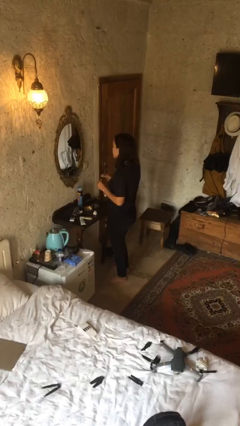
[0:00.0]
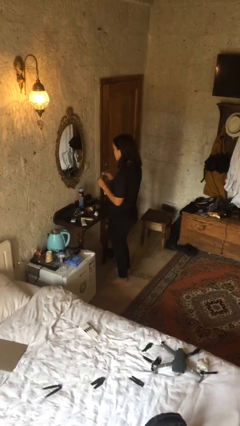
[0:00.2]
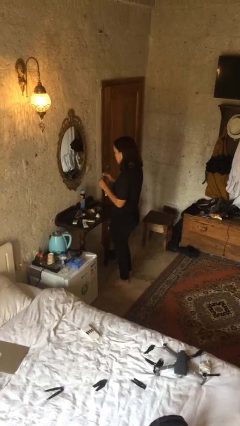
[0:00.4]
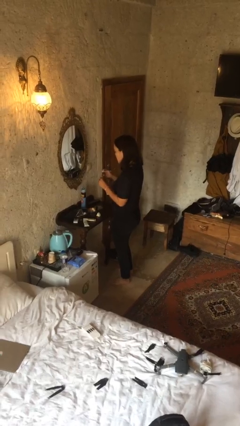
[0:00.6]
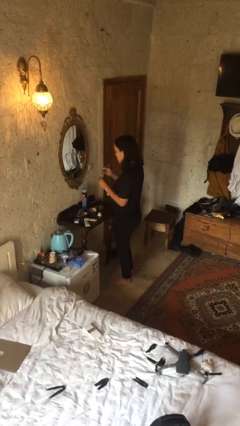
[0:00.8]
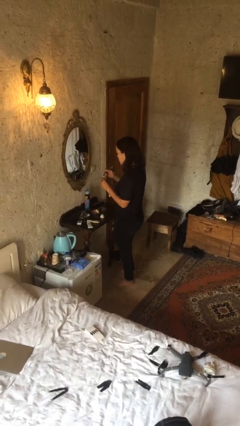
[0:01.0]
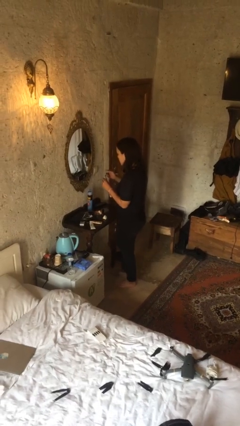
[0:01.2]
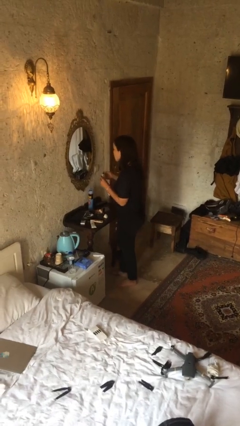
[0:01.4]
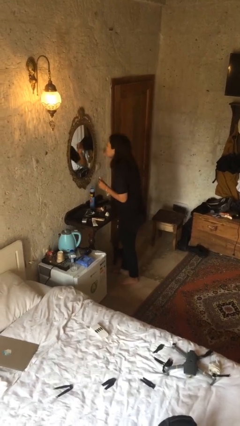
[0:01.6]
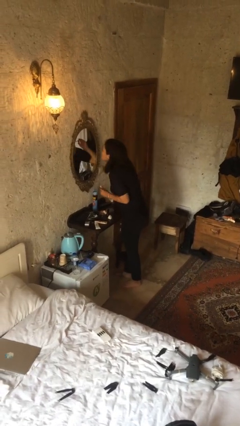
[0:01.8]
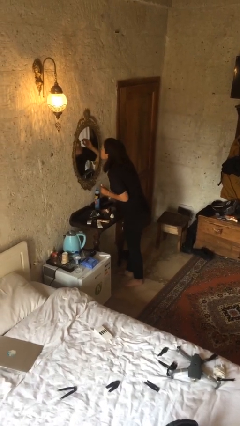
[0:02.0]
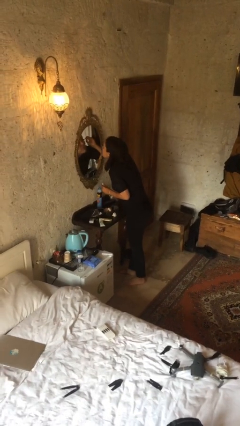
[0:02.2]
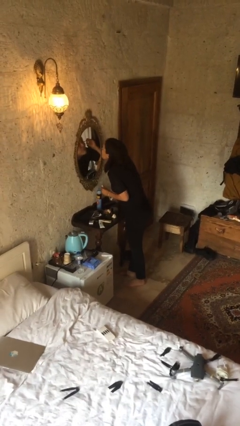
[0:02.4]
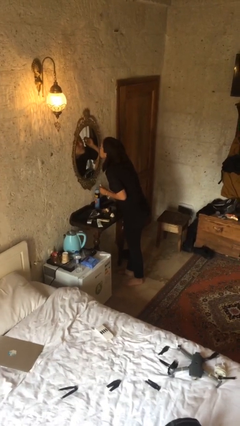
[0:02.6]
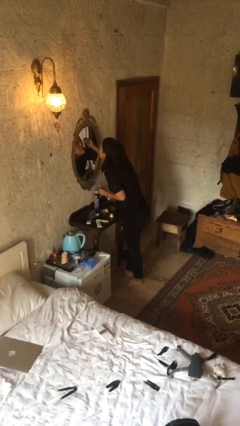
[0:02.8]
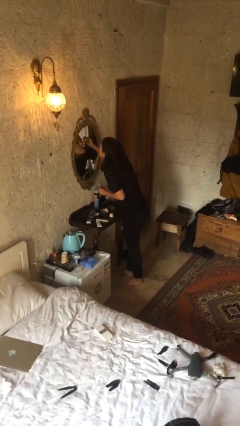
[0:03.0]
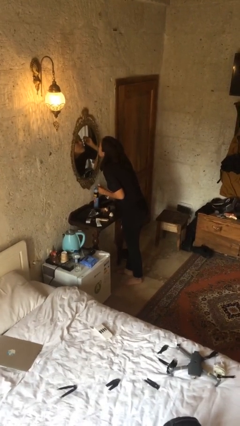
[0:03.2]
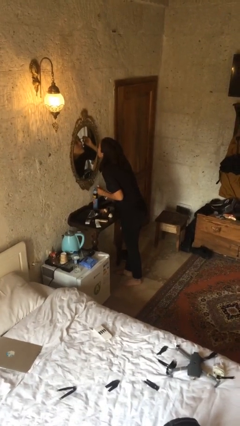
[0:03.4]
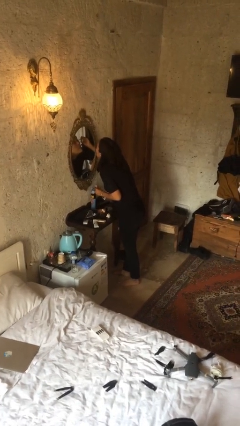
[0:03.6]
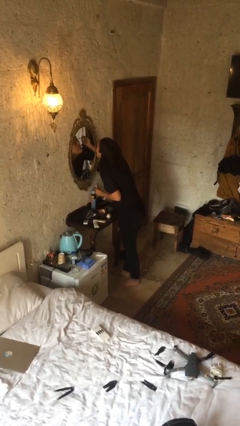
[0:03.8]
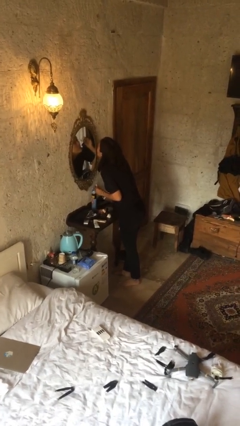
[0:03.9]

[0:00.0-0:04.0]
person applies eye makeup

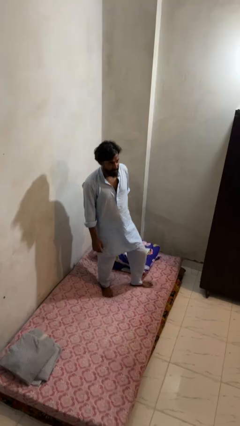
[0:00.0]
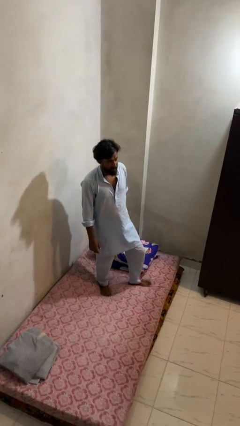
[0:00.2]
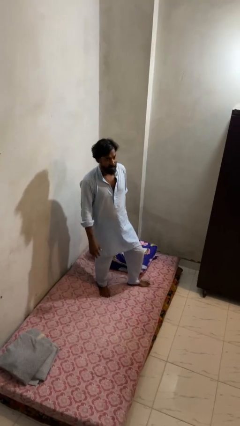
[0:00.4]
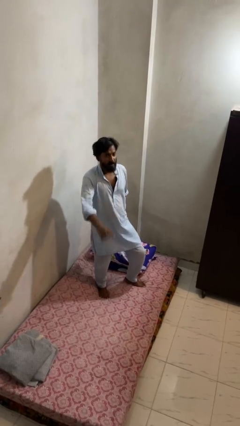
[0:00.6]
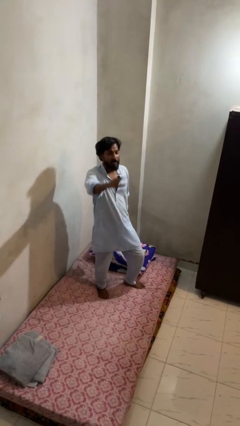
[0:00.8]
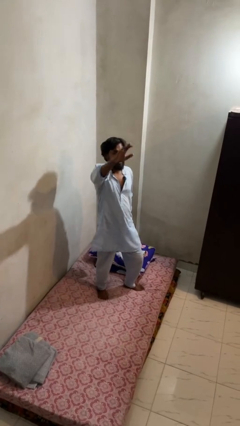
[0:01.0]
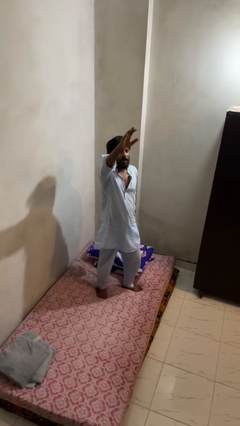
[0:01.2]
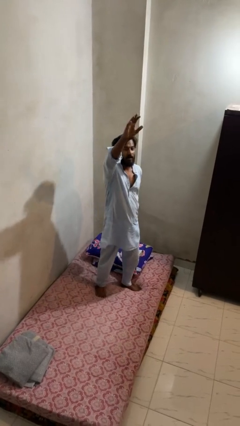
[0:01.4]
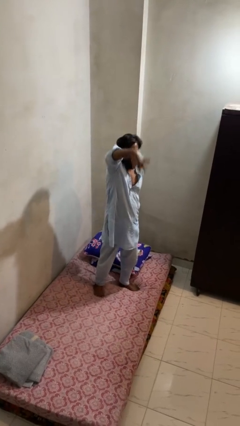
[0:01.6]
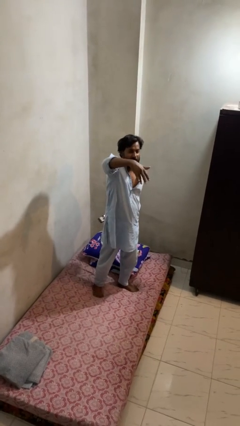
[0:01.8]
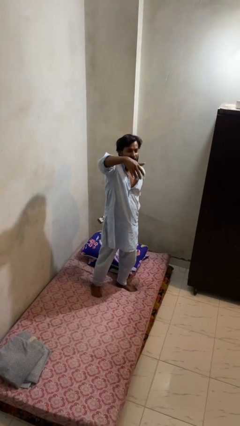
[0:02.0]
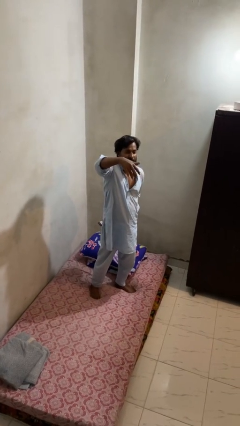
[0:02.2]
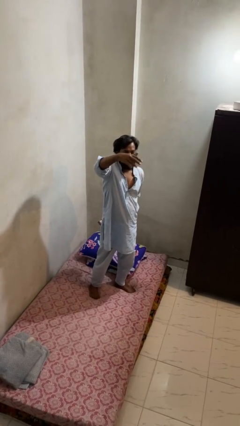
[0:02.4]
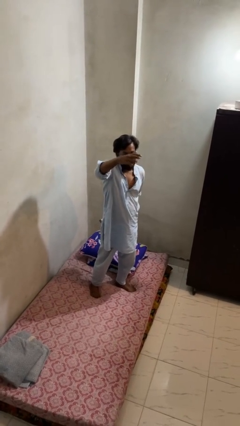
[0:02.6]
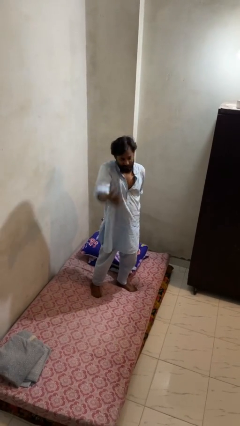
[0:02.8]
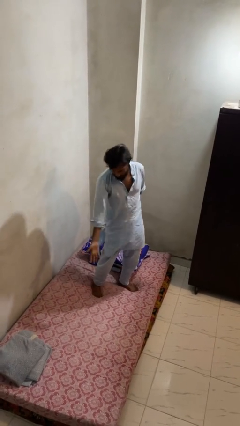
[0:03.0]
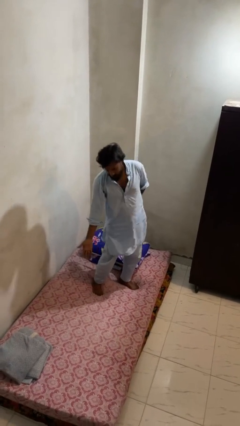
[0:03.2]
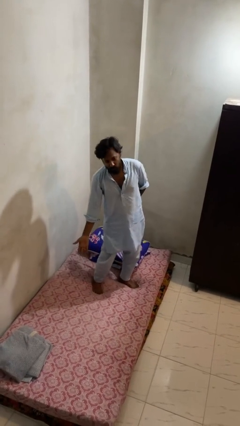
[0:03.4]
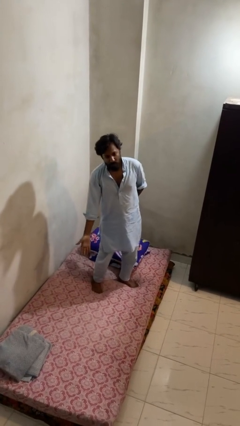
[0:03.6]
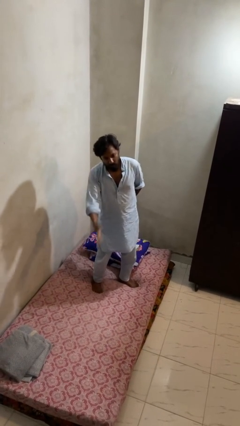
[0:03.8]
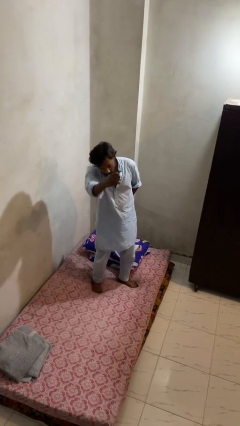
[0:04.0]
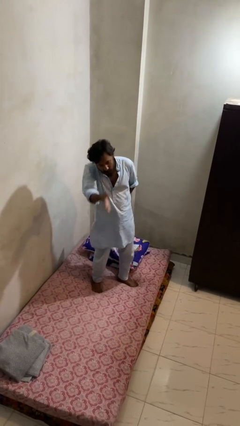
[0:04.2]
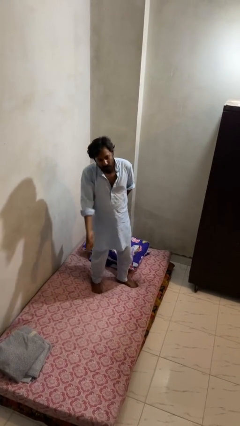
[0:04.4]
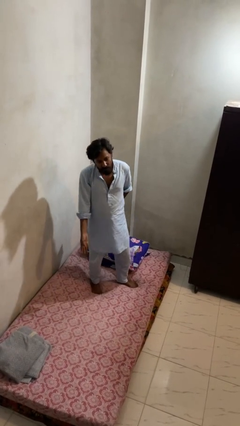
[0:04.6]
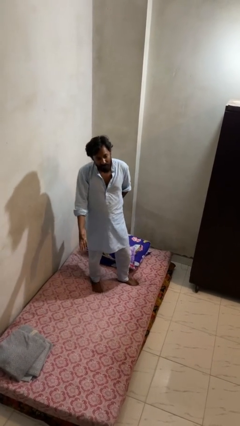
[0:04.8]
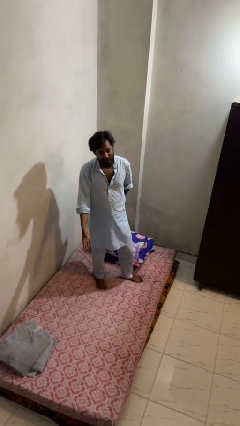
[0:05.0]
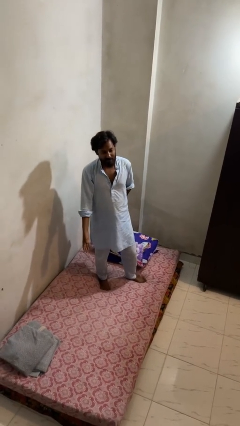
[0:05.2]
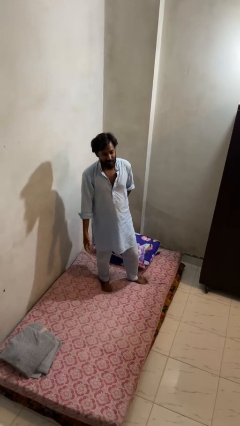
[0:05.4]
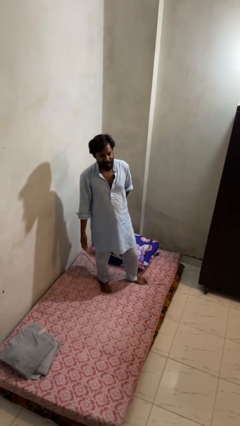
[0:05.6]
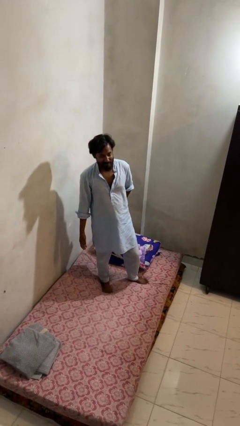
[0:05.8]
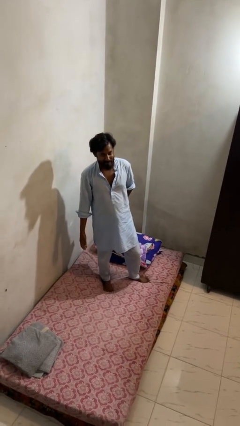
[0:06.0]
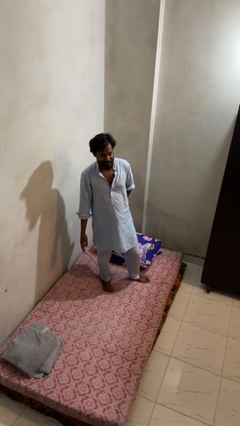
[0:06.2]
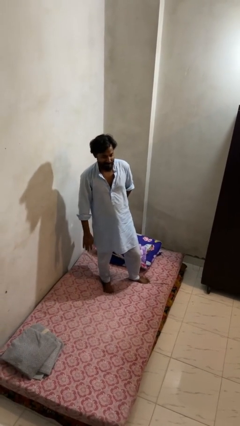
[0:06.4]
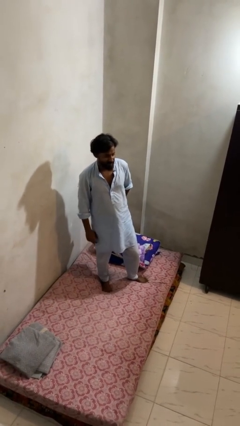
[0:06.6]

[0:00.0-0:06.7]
person gestures come here

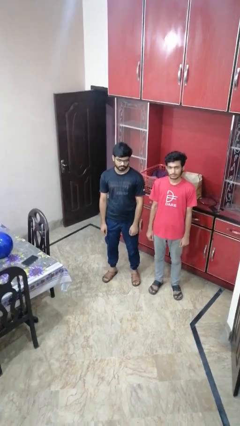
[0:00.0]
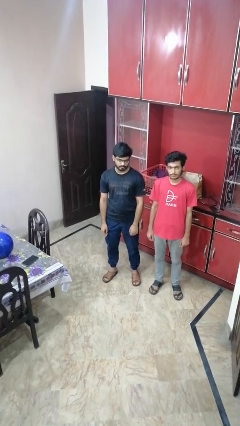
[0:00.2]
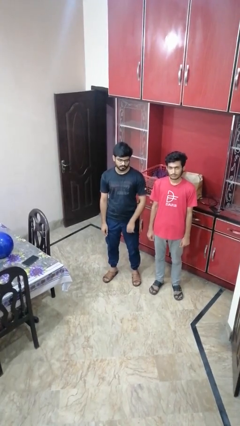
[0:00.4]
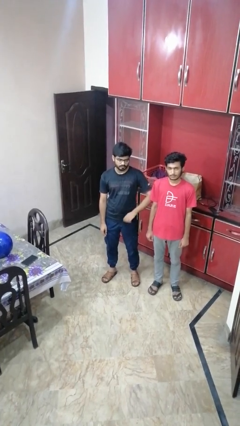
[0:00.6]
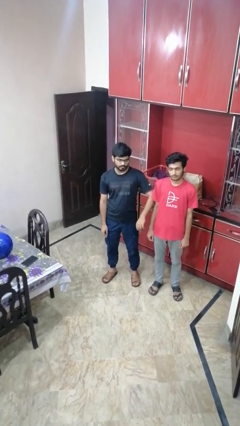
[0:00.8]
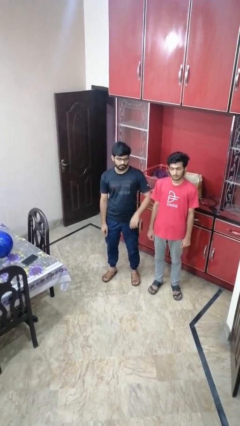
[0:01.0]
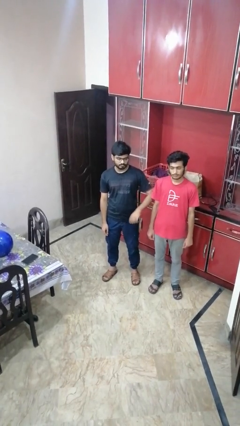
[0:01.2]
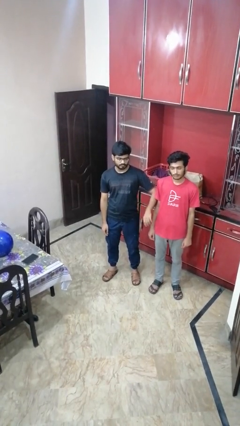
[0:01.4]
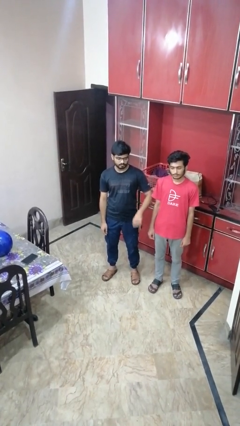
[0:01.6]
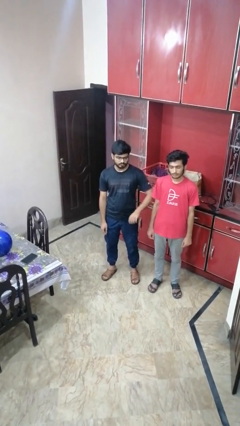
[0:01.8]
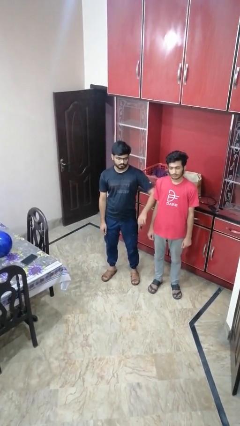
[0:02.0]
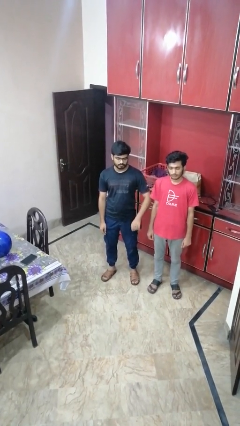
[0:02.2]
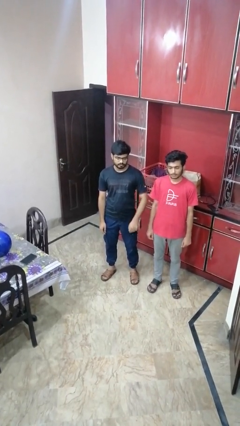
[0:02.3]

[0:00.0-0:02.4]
person nudges person with elbow

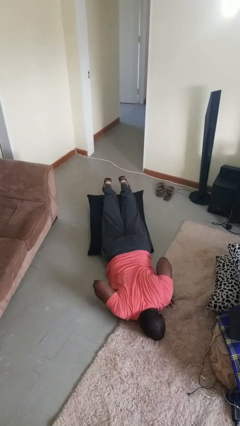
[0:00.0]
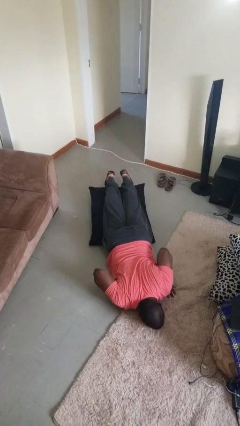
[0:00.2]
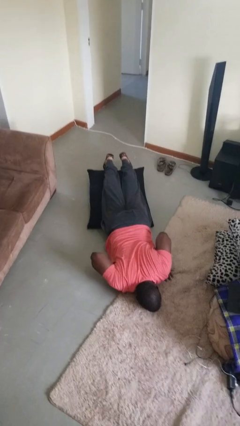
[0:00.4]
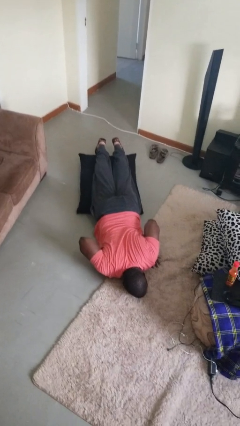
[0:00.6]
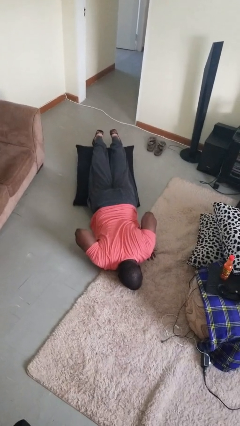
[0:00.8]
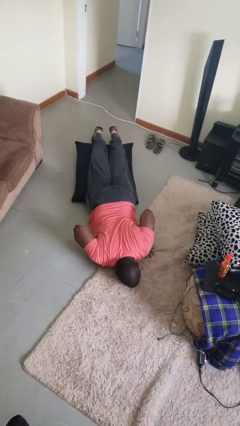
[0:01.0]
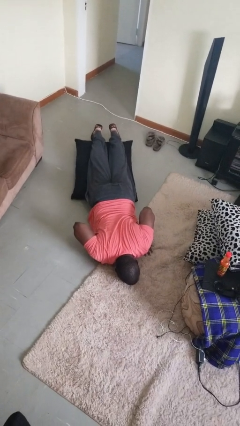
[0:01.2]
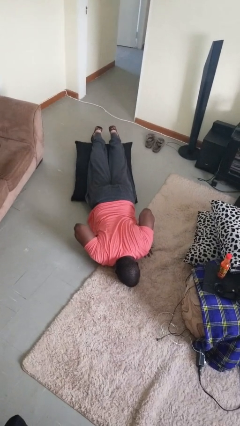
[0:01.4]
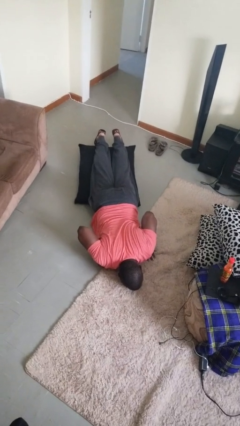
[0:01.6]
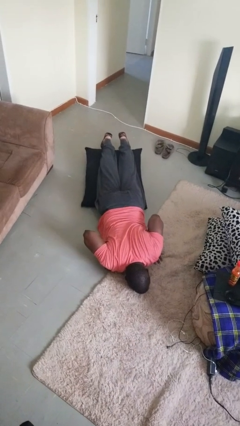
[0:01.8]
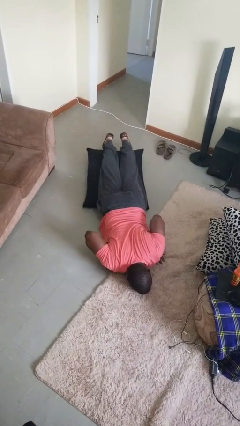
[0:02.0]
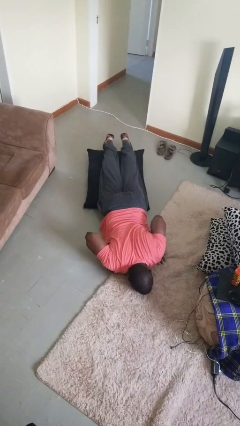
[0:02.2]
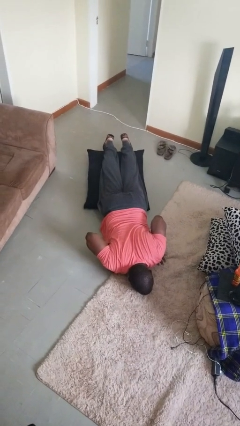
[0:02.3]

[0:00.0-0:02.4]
person lies down on floor

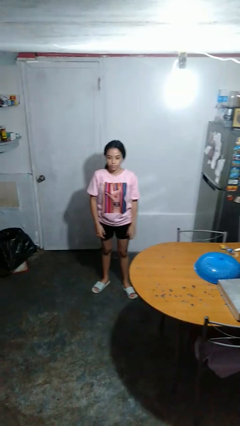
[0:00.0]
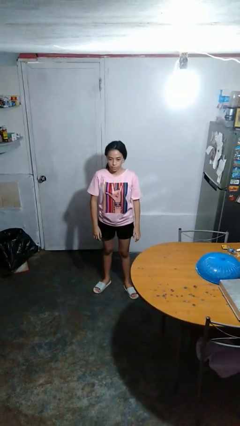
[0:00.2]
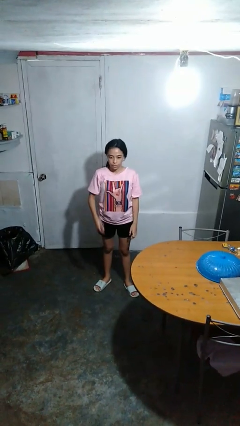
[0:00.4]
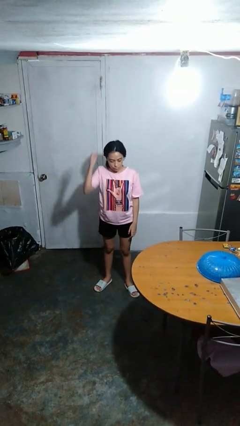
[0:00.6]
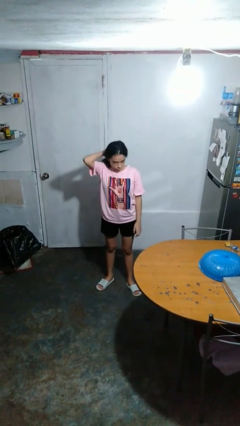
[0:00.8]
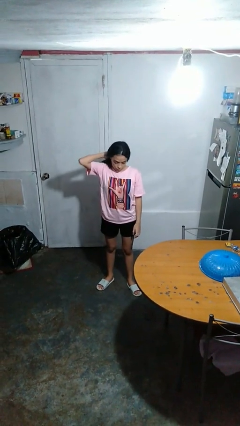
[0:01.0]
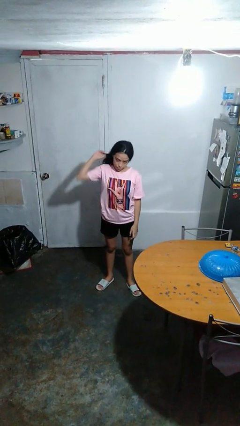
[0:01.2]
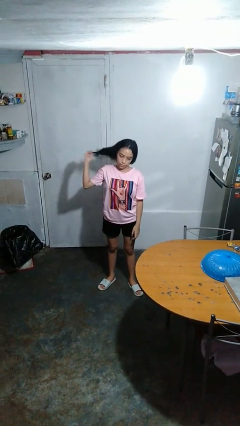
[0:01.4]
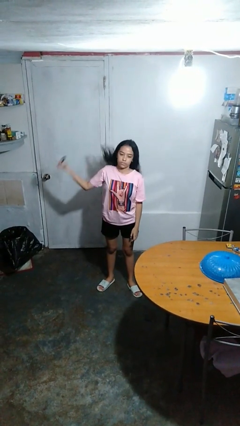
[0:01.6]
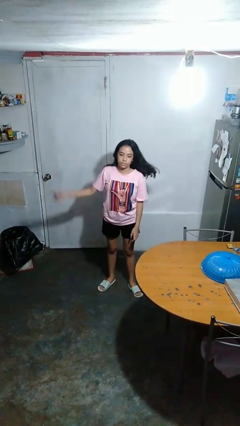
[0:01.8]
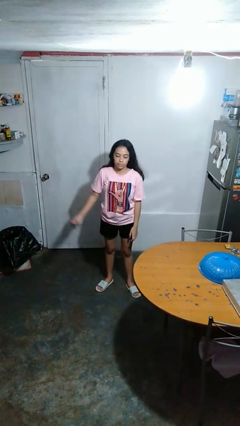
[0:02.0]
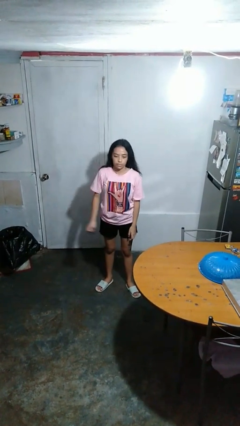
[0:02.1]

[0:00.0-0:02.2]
person takes off hairtie

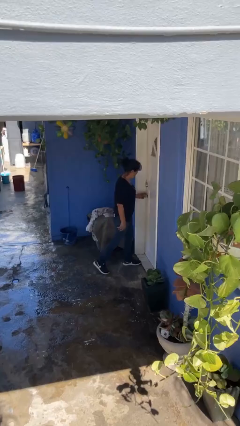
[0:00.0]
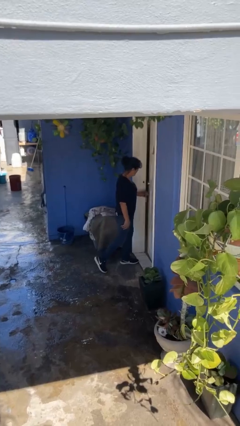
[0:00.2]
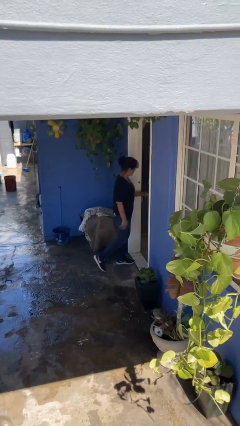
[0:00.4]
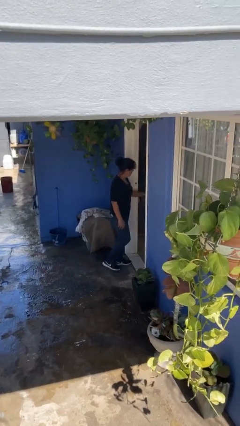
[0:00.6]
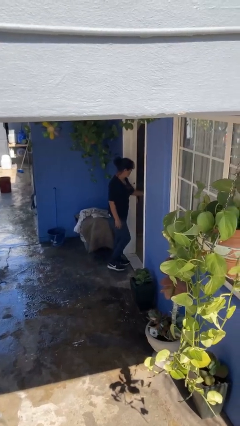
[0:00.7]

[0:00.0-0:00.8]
person opens facility door
